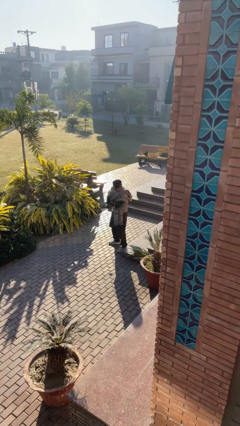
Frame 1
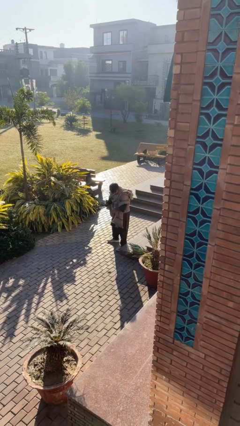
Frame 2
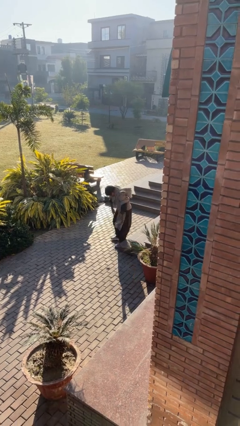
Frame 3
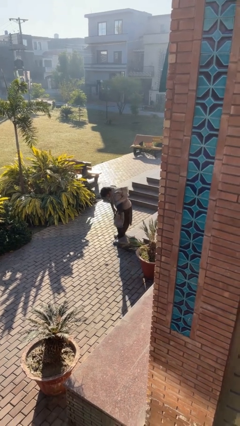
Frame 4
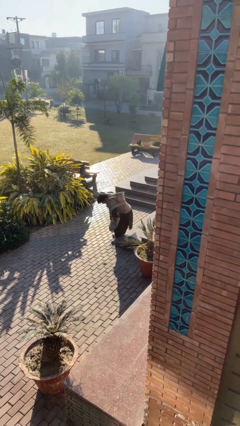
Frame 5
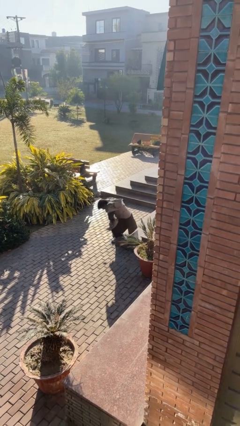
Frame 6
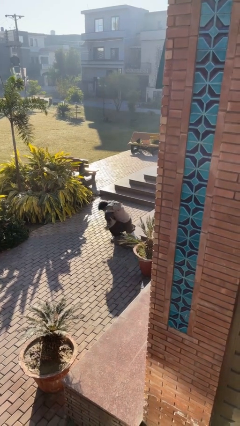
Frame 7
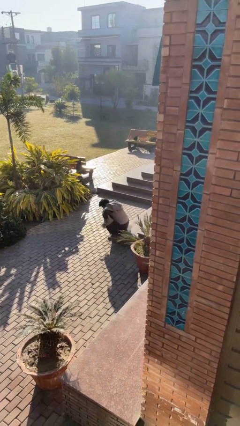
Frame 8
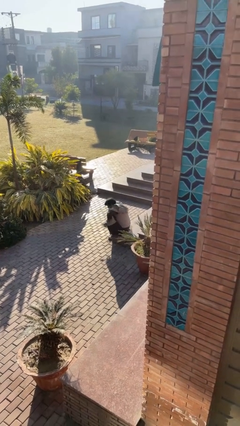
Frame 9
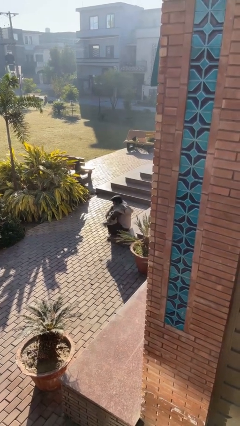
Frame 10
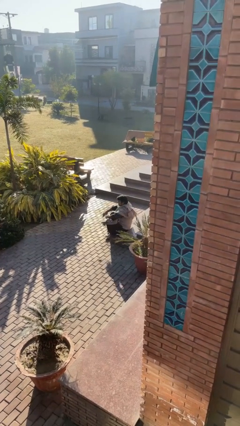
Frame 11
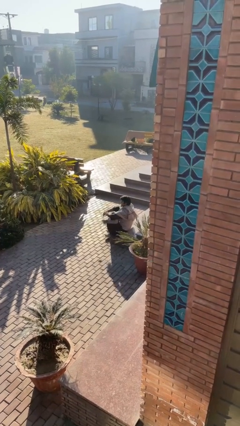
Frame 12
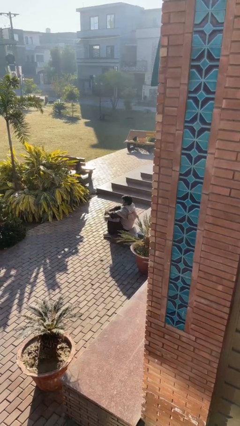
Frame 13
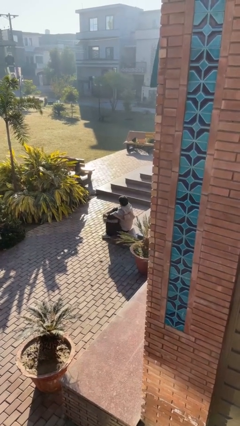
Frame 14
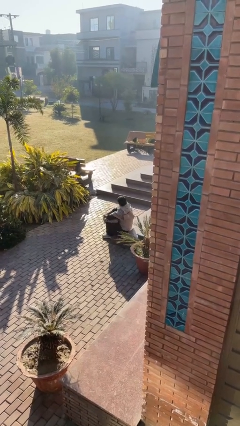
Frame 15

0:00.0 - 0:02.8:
person sits down

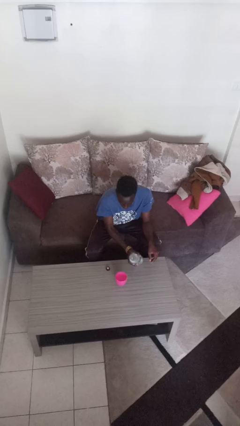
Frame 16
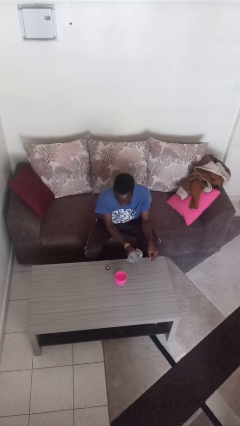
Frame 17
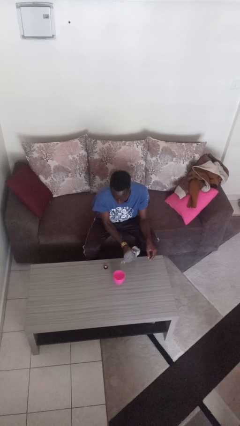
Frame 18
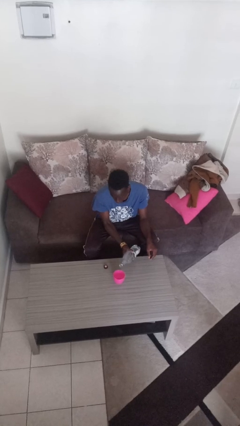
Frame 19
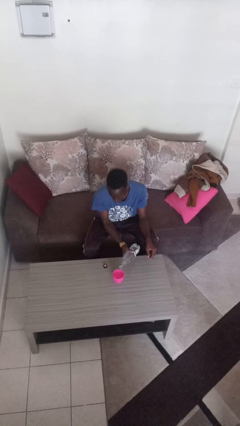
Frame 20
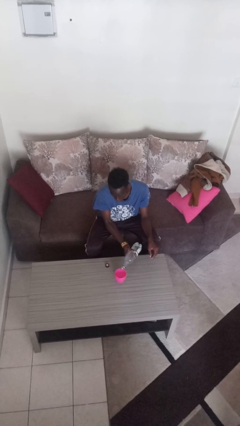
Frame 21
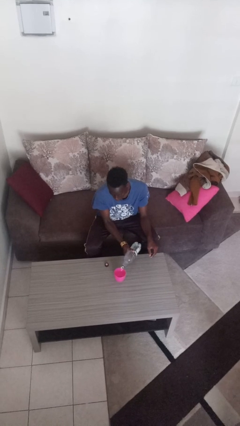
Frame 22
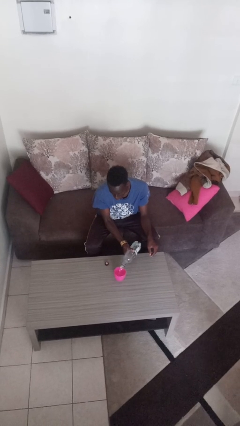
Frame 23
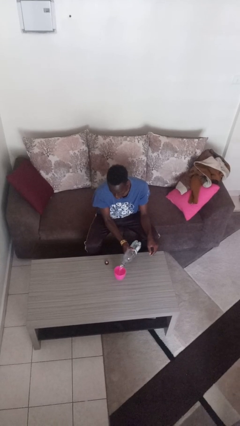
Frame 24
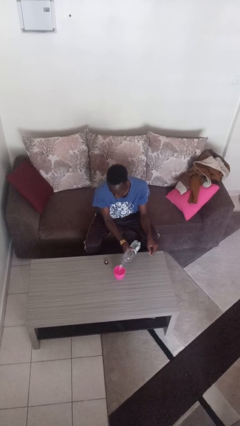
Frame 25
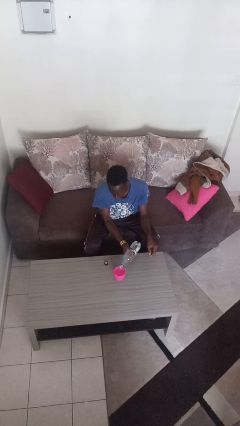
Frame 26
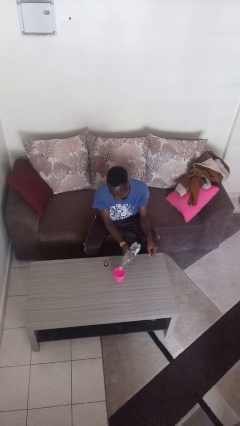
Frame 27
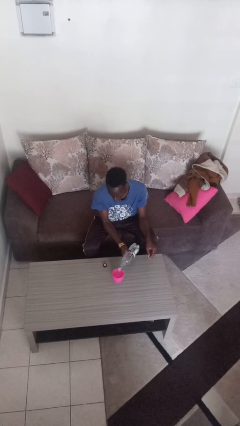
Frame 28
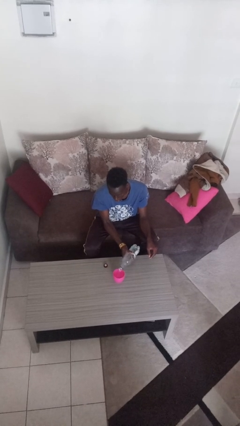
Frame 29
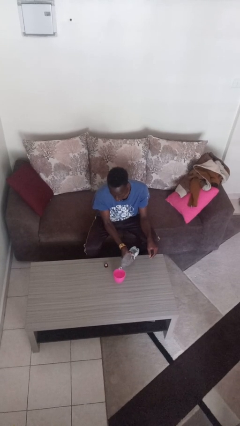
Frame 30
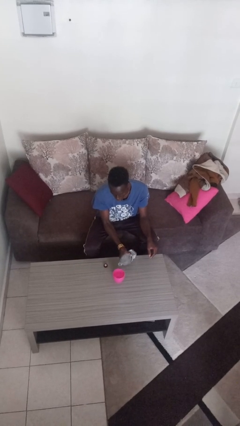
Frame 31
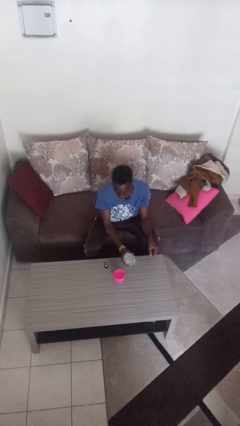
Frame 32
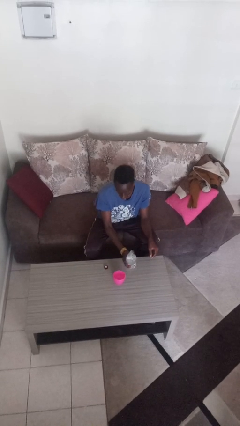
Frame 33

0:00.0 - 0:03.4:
person pours liquid into cup

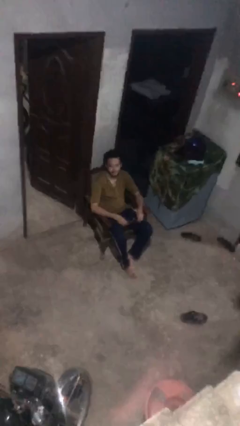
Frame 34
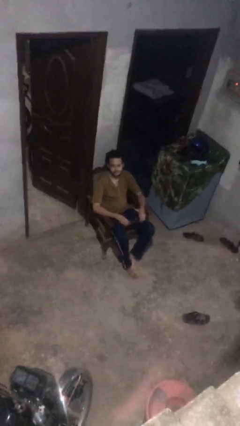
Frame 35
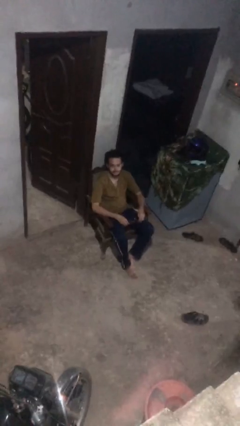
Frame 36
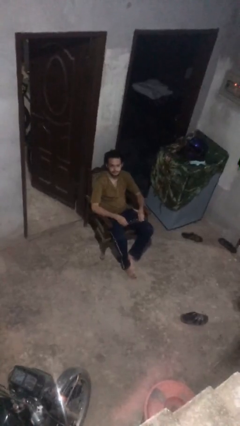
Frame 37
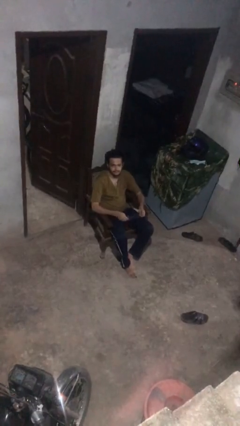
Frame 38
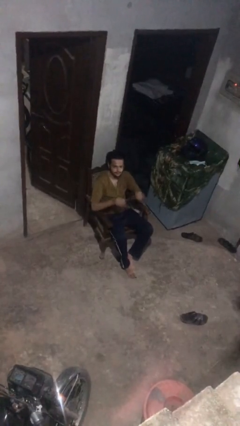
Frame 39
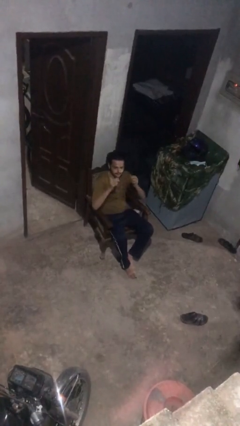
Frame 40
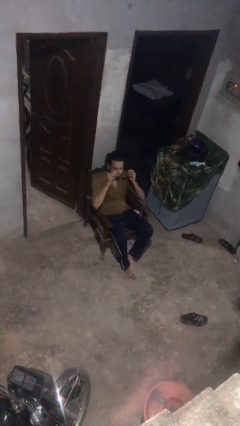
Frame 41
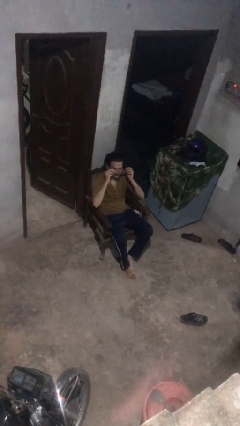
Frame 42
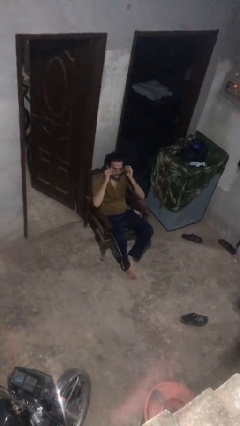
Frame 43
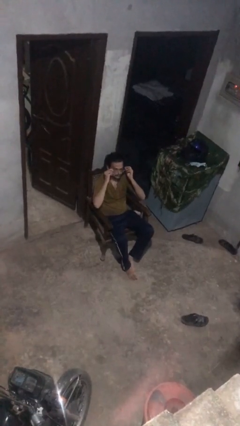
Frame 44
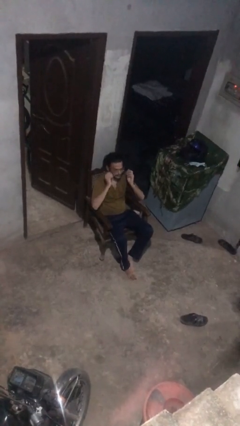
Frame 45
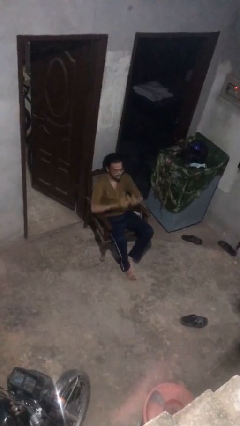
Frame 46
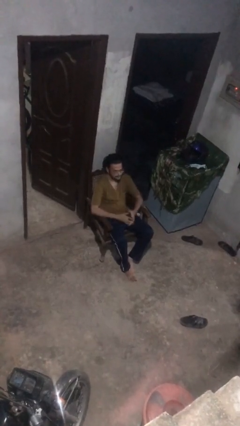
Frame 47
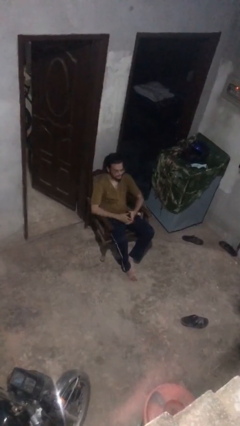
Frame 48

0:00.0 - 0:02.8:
person puts on glasses

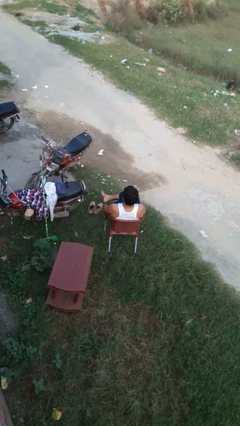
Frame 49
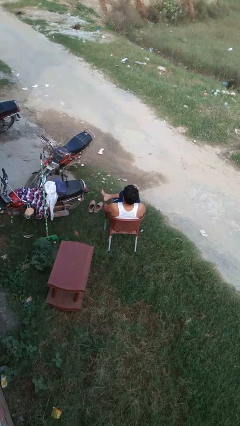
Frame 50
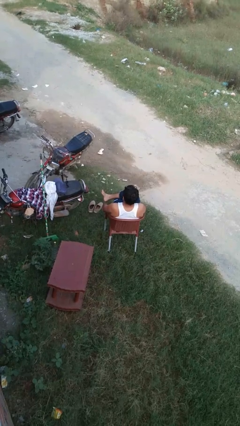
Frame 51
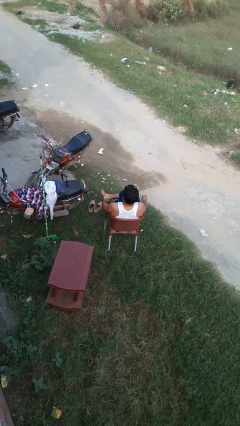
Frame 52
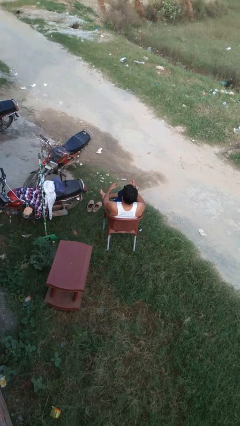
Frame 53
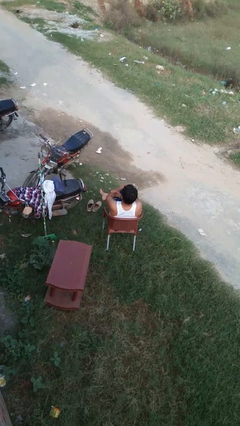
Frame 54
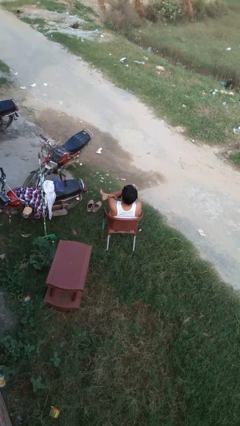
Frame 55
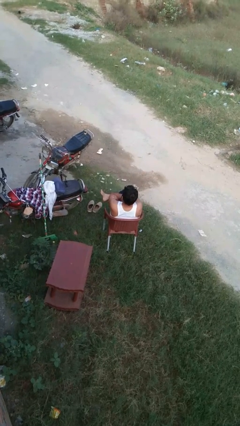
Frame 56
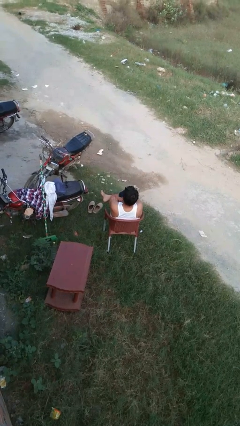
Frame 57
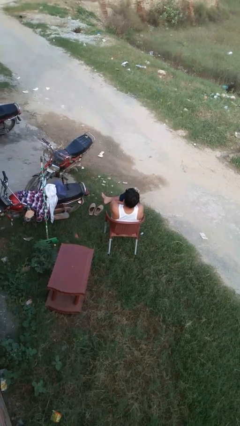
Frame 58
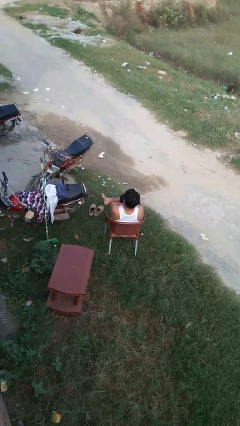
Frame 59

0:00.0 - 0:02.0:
person crosses arms

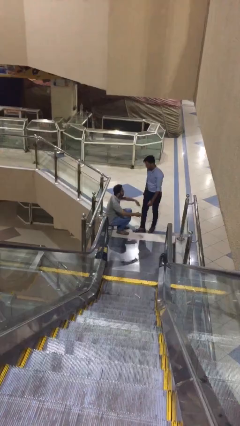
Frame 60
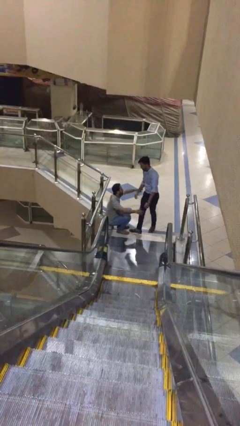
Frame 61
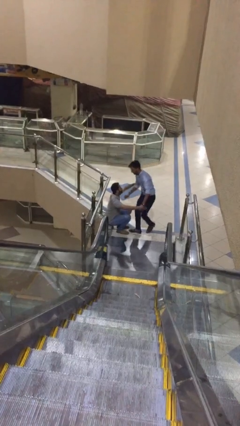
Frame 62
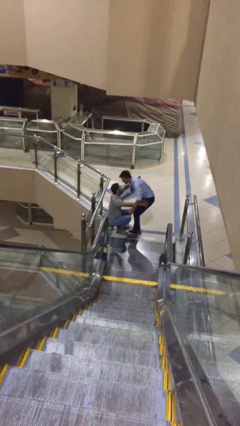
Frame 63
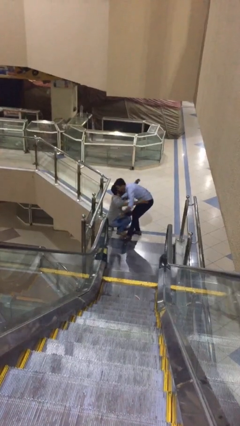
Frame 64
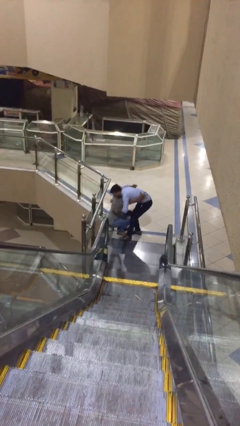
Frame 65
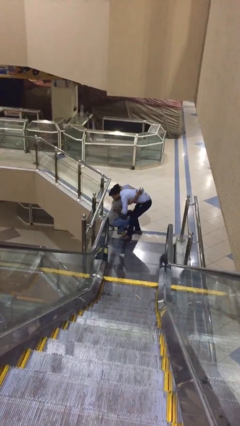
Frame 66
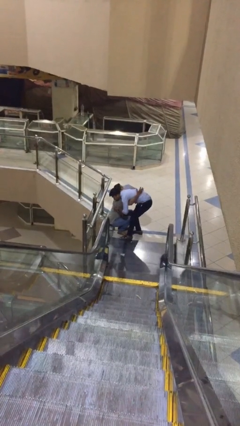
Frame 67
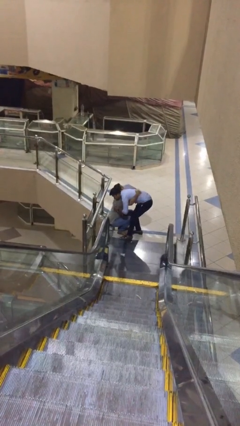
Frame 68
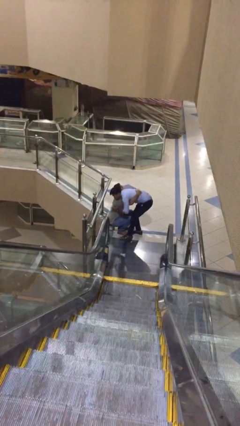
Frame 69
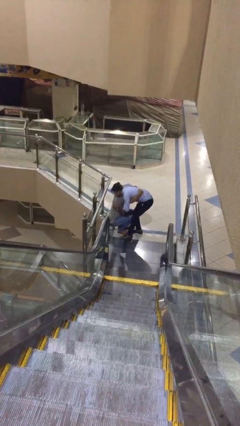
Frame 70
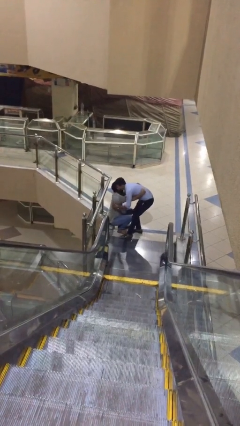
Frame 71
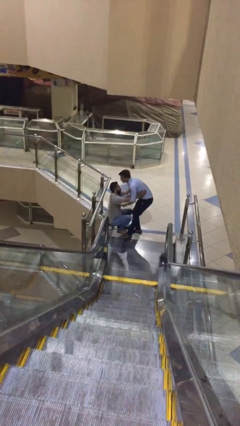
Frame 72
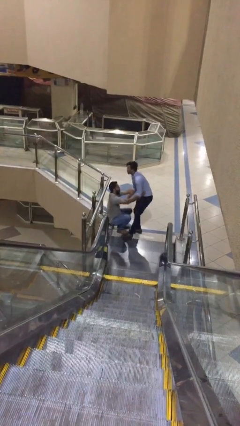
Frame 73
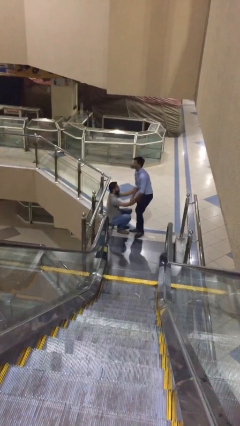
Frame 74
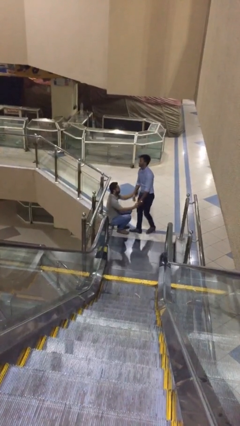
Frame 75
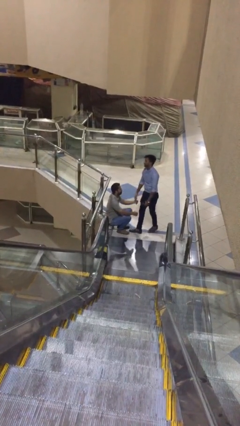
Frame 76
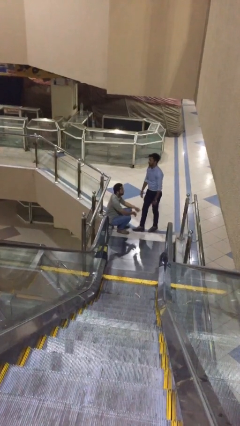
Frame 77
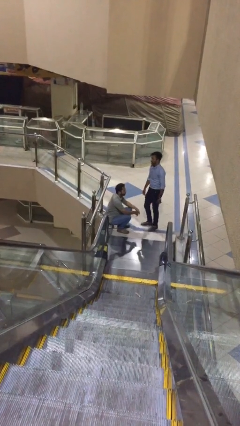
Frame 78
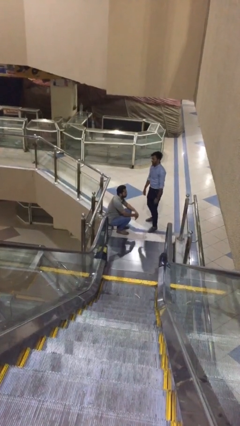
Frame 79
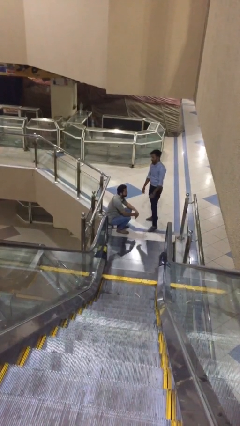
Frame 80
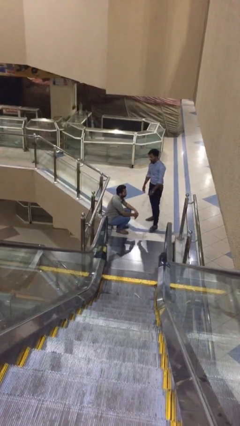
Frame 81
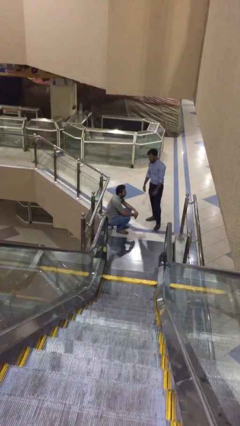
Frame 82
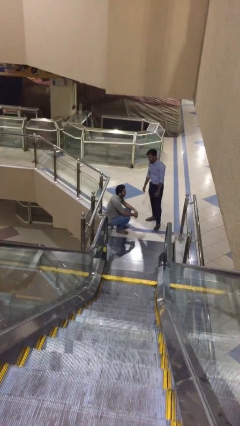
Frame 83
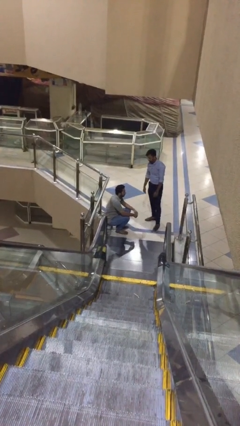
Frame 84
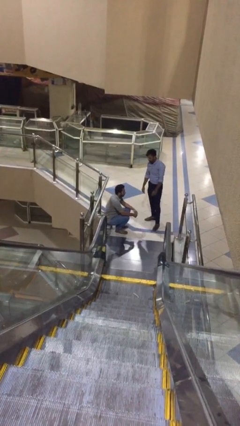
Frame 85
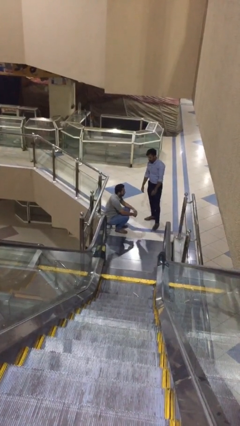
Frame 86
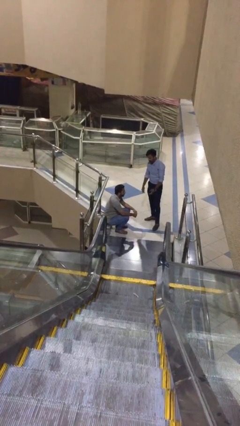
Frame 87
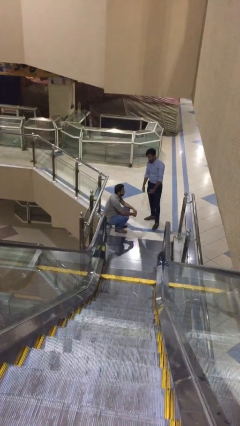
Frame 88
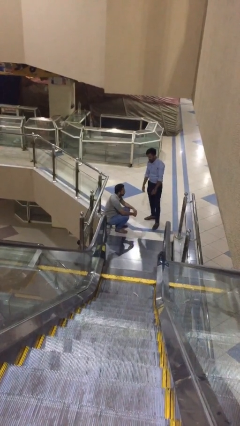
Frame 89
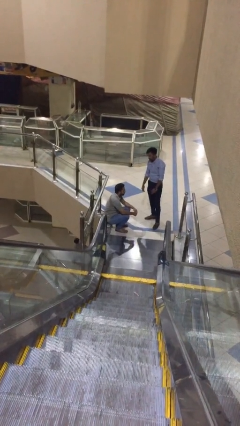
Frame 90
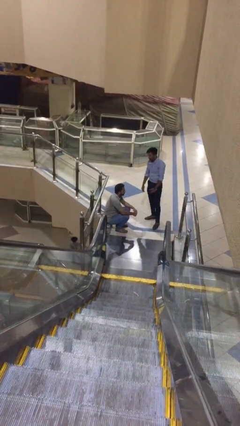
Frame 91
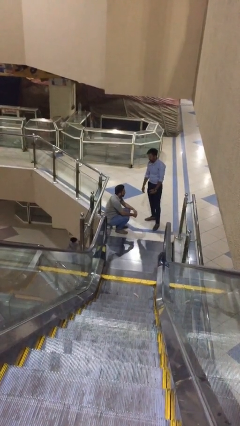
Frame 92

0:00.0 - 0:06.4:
person embraces person
